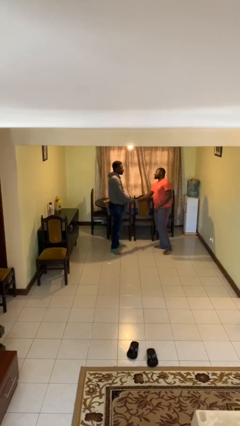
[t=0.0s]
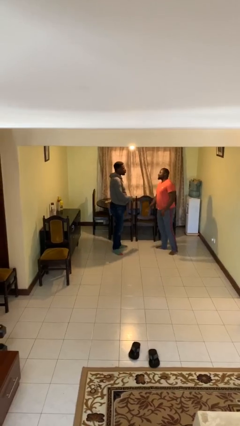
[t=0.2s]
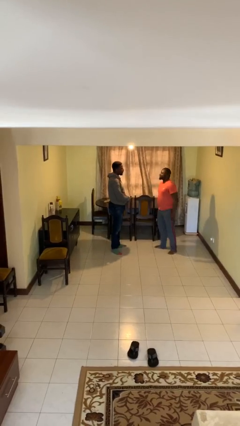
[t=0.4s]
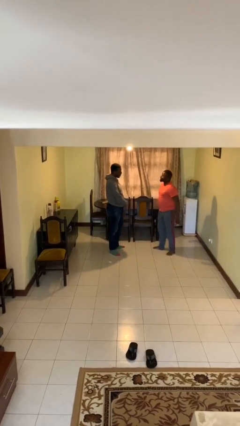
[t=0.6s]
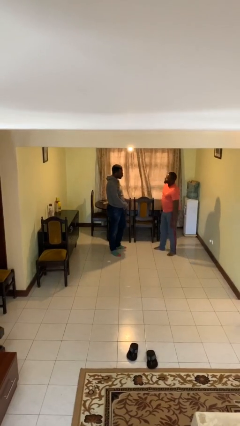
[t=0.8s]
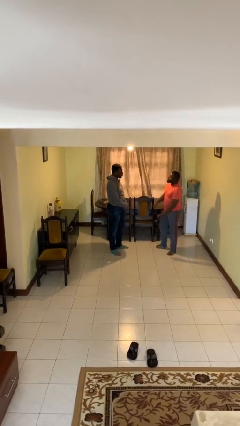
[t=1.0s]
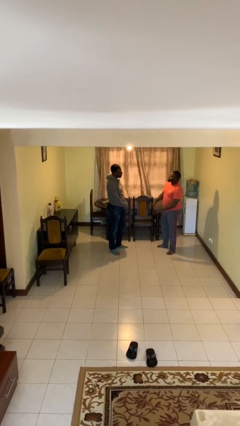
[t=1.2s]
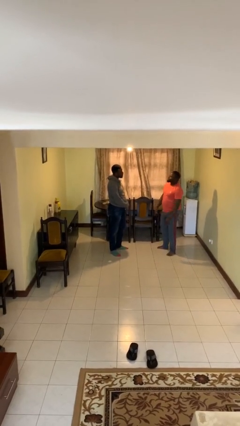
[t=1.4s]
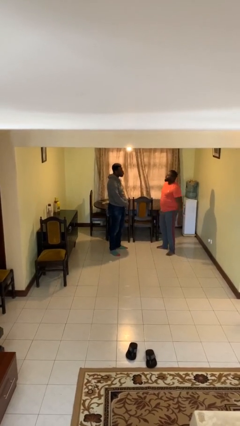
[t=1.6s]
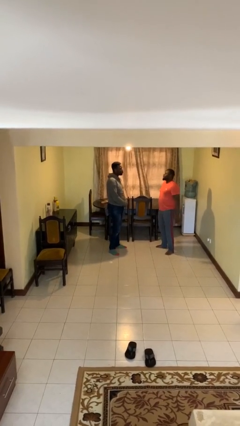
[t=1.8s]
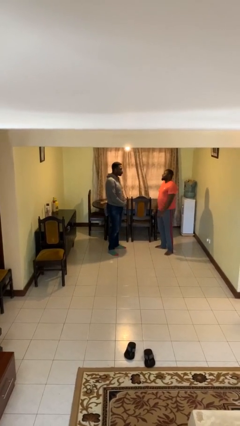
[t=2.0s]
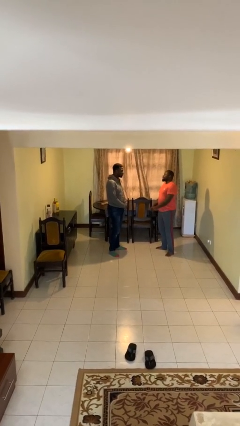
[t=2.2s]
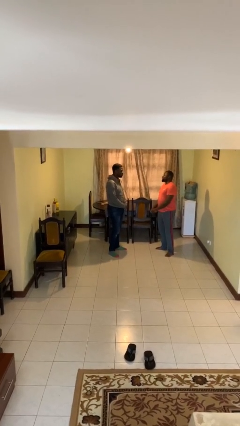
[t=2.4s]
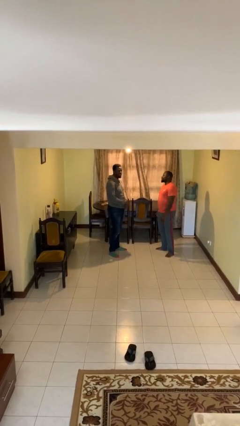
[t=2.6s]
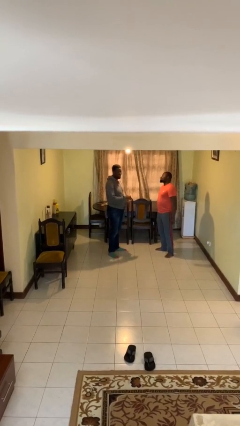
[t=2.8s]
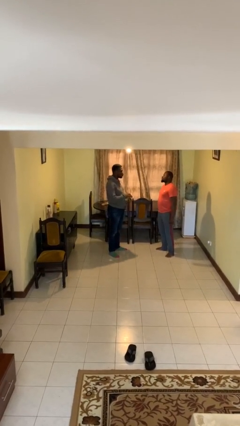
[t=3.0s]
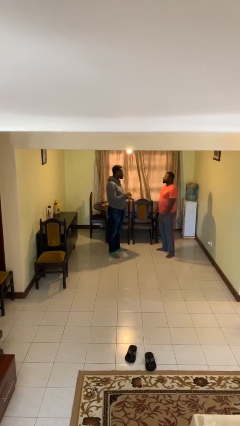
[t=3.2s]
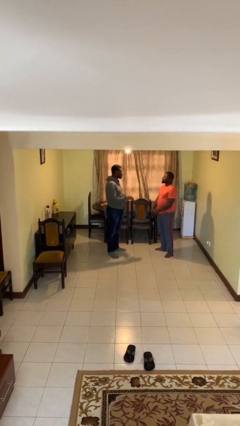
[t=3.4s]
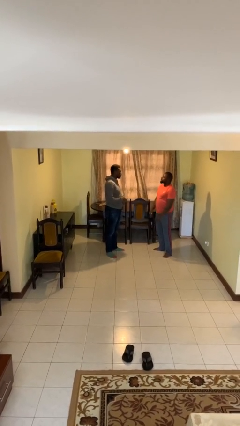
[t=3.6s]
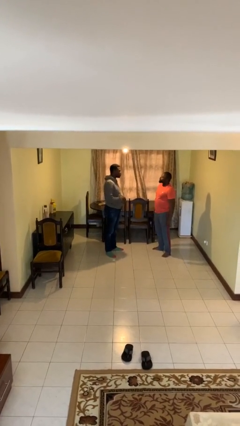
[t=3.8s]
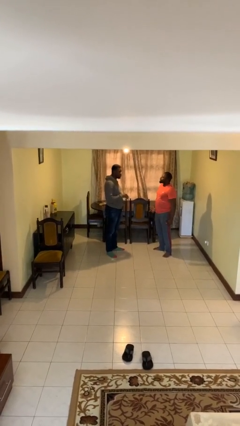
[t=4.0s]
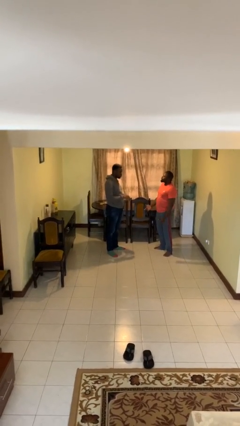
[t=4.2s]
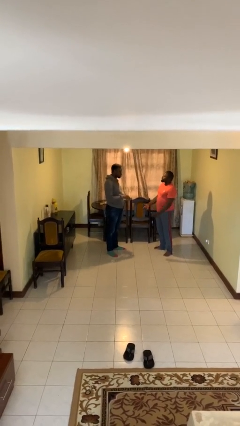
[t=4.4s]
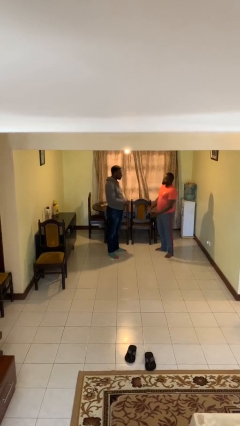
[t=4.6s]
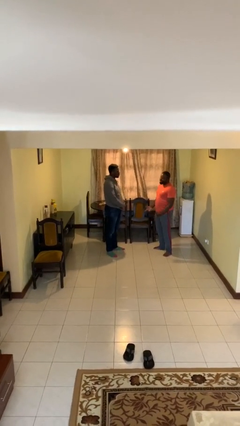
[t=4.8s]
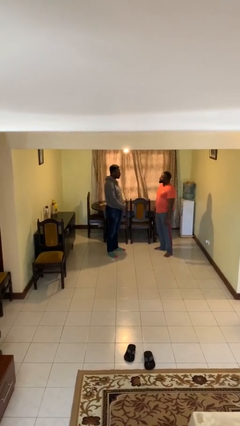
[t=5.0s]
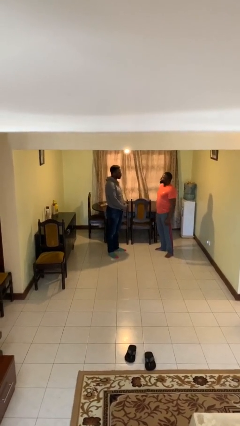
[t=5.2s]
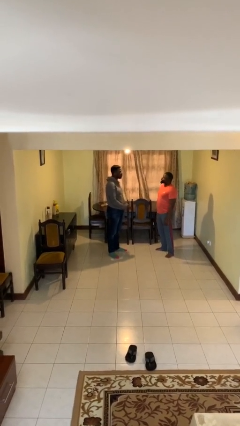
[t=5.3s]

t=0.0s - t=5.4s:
person talks to person

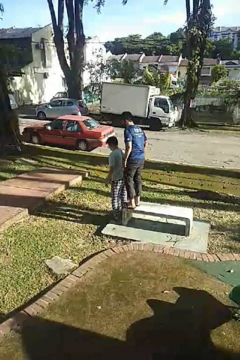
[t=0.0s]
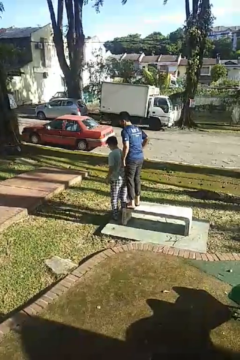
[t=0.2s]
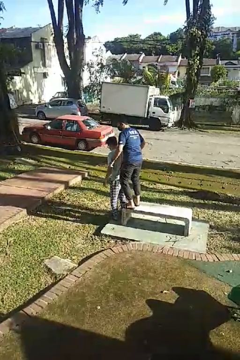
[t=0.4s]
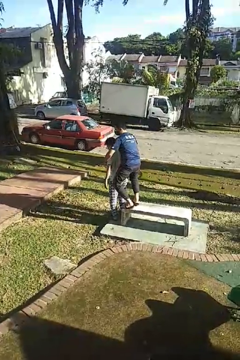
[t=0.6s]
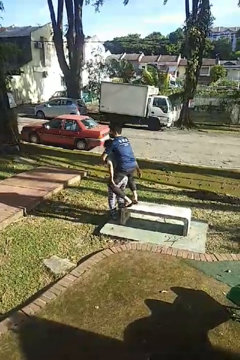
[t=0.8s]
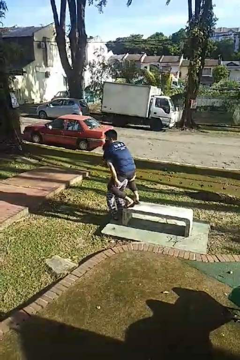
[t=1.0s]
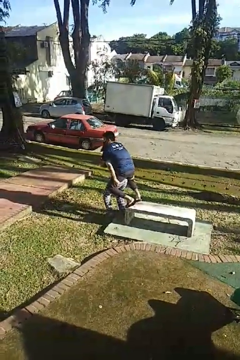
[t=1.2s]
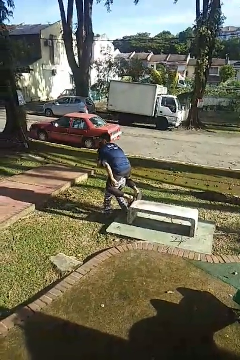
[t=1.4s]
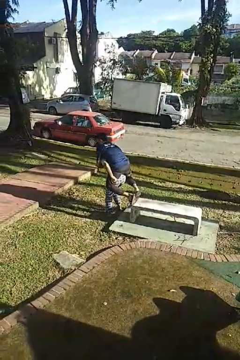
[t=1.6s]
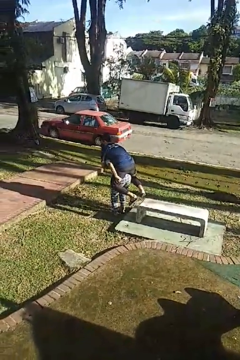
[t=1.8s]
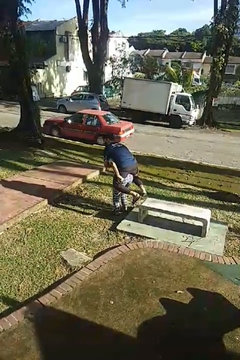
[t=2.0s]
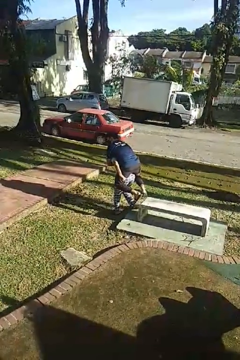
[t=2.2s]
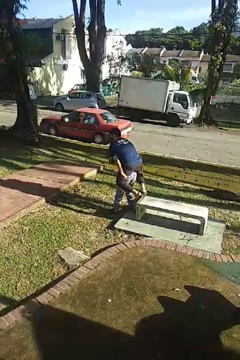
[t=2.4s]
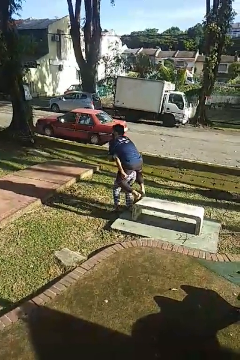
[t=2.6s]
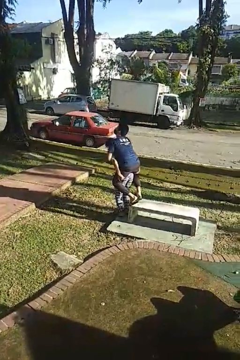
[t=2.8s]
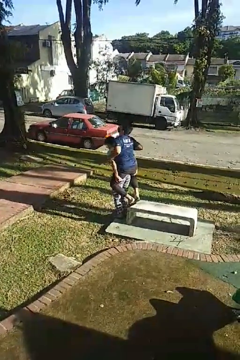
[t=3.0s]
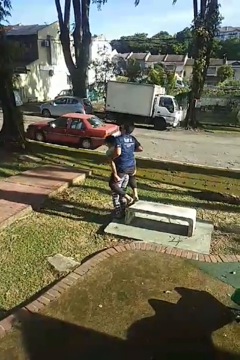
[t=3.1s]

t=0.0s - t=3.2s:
person carries person on back

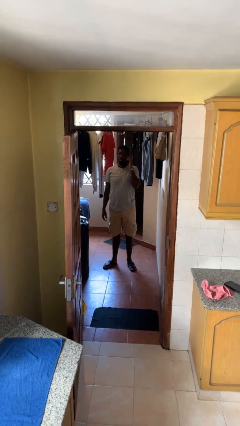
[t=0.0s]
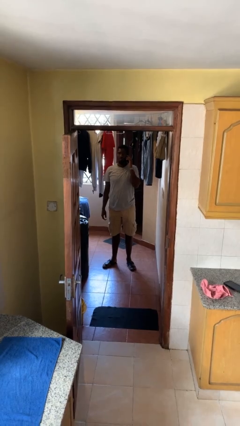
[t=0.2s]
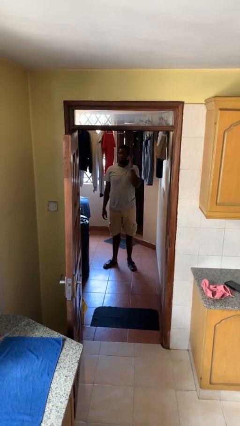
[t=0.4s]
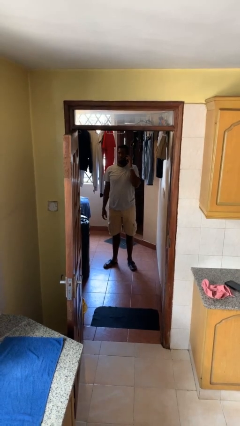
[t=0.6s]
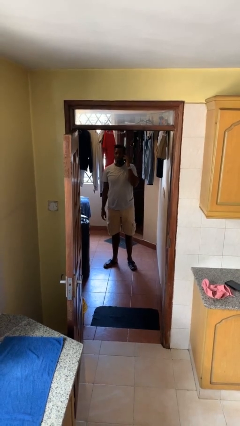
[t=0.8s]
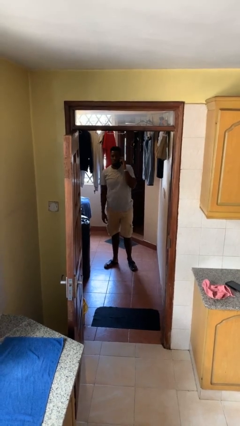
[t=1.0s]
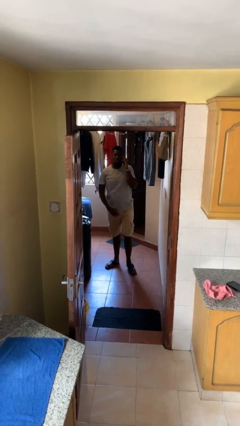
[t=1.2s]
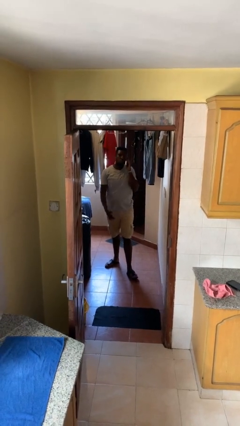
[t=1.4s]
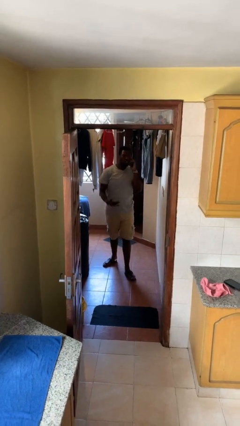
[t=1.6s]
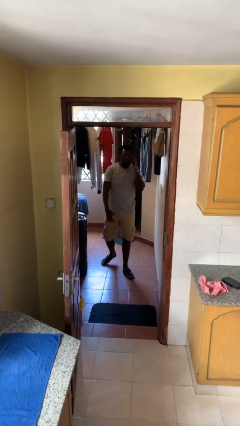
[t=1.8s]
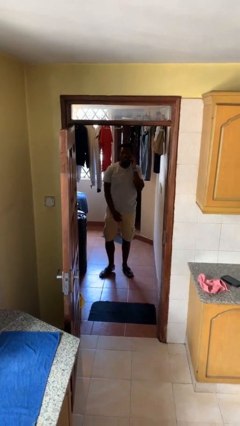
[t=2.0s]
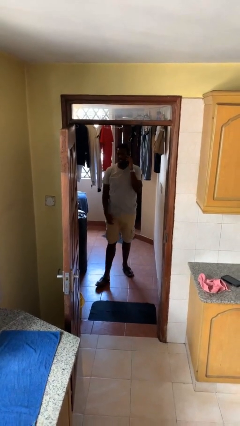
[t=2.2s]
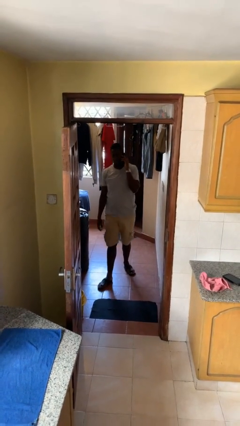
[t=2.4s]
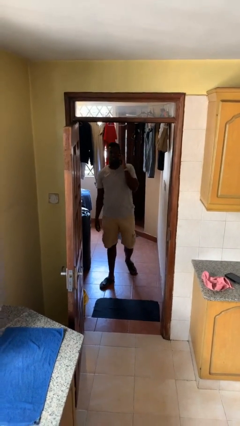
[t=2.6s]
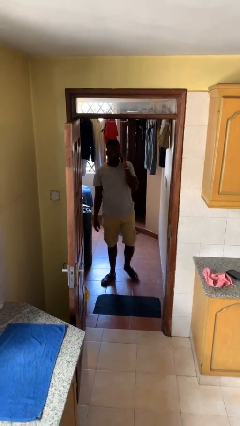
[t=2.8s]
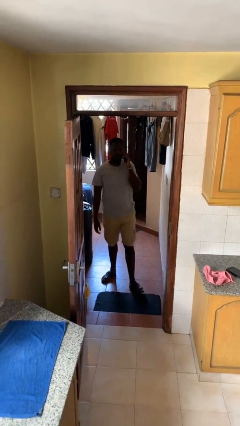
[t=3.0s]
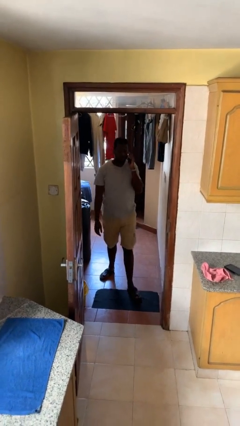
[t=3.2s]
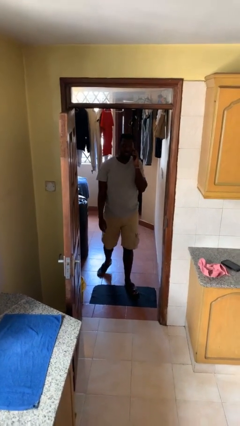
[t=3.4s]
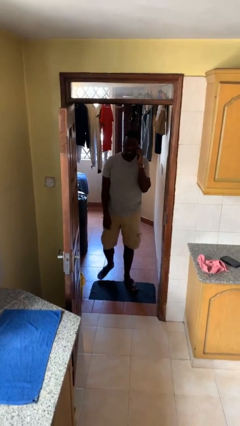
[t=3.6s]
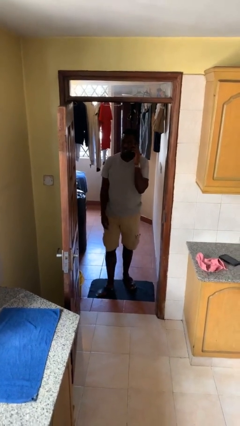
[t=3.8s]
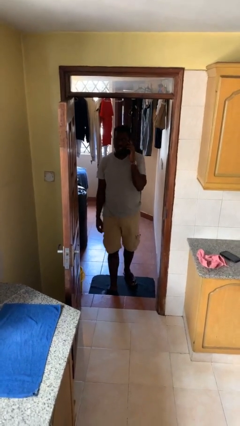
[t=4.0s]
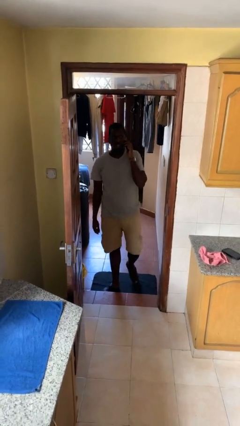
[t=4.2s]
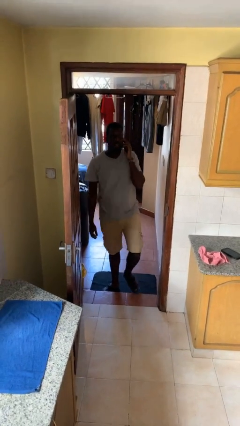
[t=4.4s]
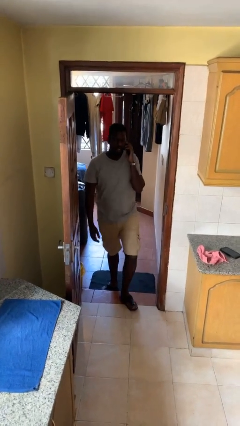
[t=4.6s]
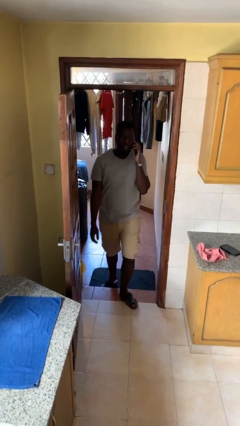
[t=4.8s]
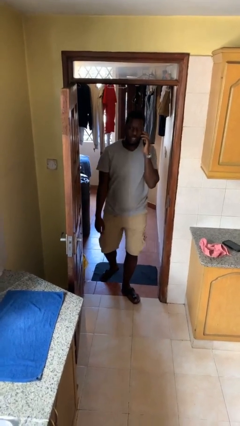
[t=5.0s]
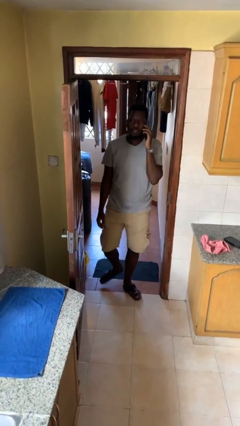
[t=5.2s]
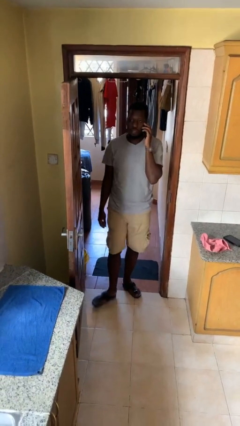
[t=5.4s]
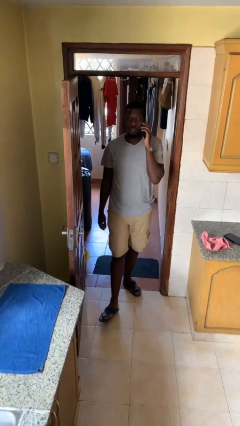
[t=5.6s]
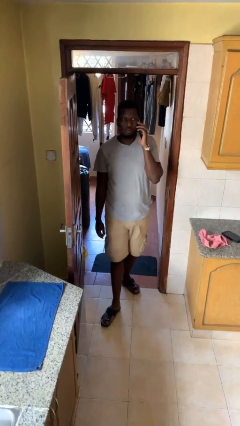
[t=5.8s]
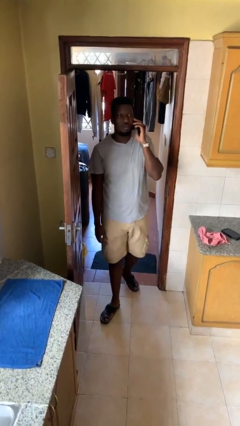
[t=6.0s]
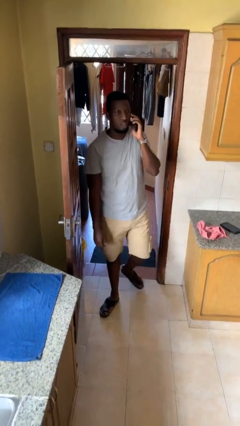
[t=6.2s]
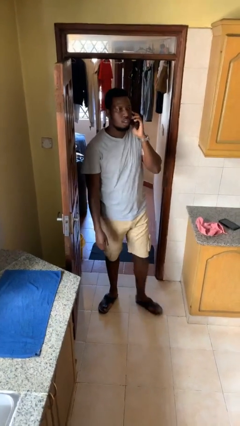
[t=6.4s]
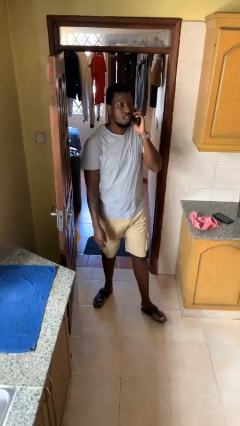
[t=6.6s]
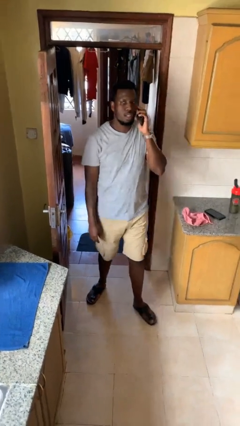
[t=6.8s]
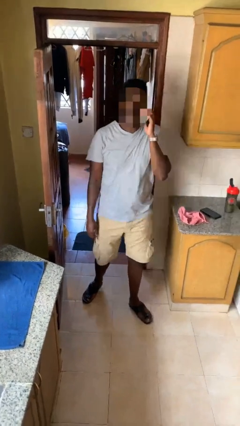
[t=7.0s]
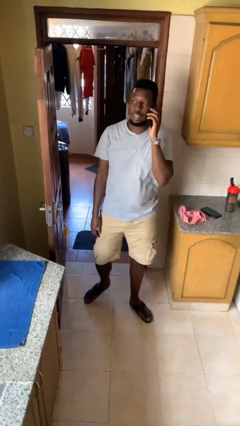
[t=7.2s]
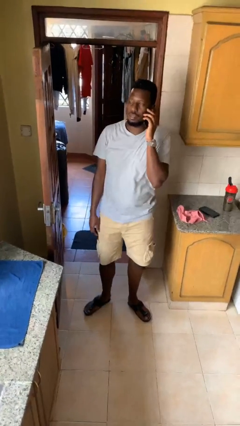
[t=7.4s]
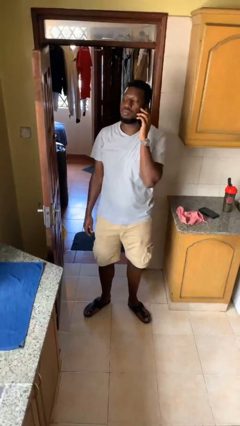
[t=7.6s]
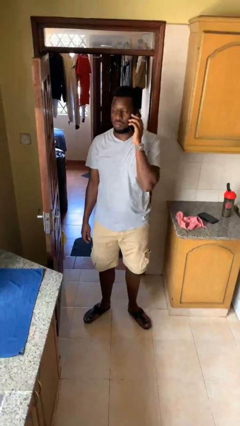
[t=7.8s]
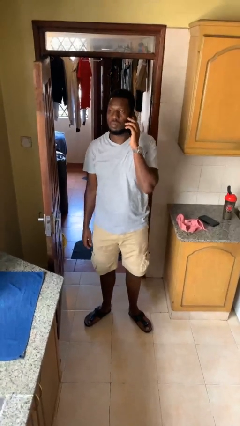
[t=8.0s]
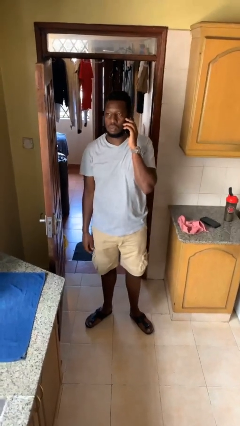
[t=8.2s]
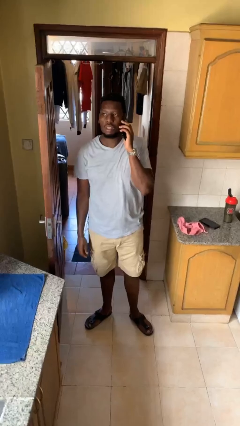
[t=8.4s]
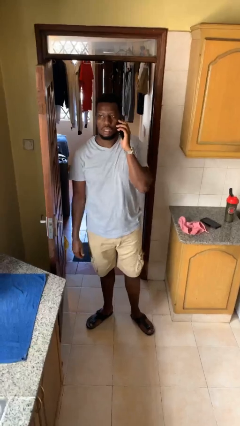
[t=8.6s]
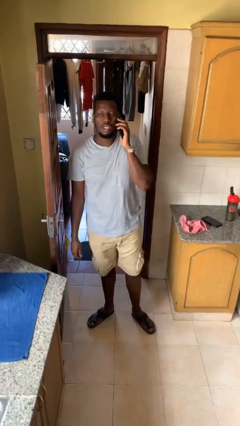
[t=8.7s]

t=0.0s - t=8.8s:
person enters scene through structure

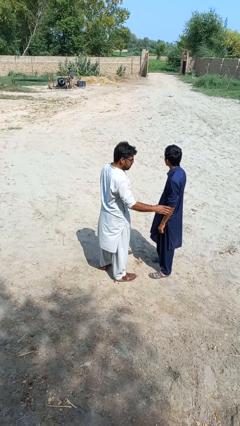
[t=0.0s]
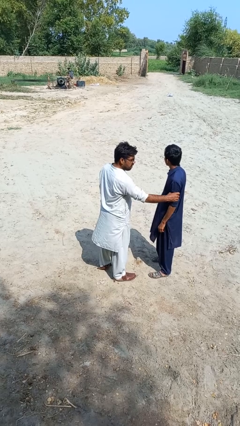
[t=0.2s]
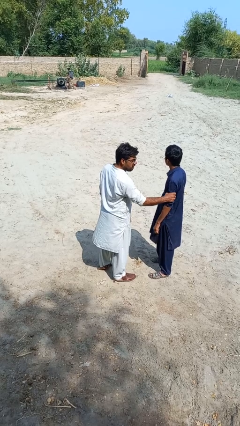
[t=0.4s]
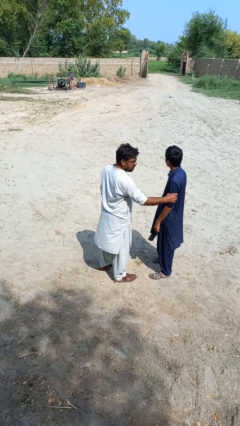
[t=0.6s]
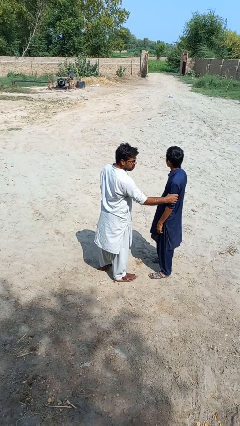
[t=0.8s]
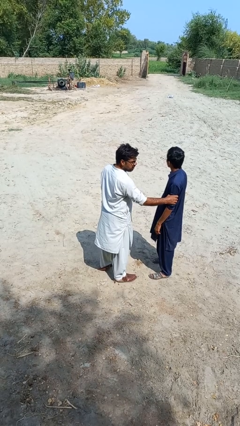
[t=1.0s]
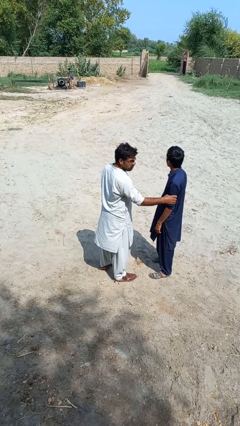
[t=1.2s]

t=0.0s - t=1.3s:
person grabs person by bicep
